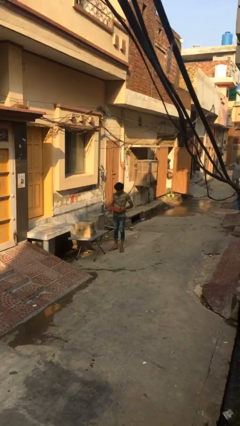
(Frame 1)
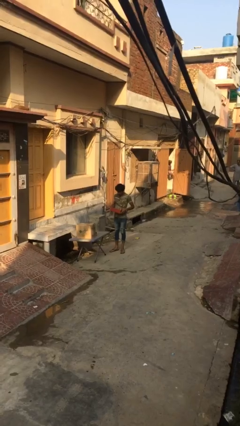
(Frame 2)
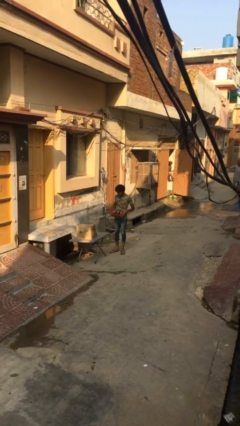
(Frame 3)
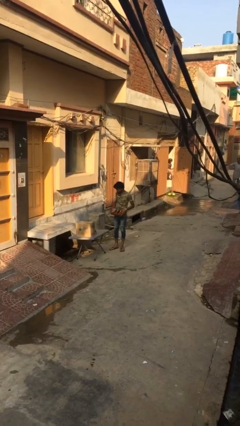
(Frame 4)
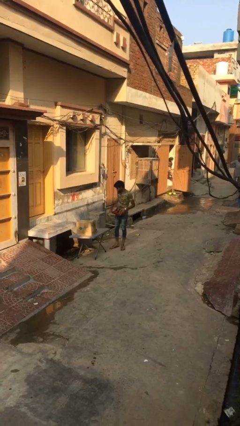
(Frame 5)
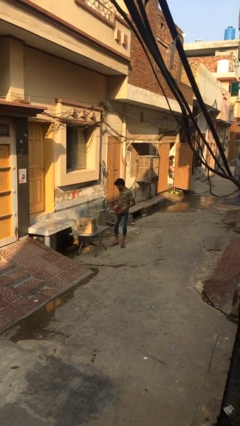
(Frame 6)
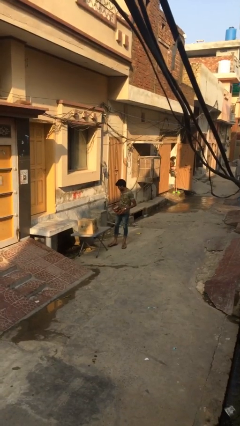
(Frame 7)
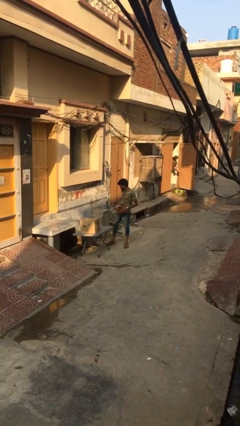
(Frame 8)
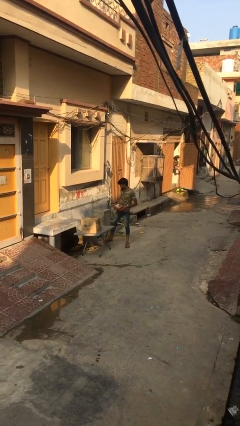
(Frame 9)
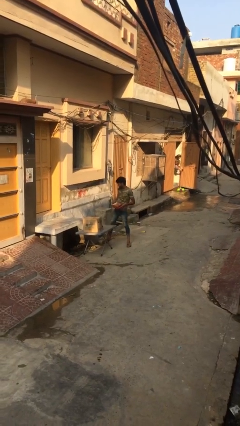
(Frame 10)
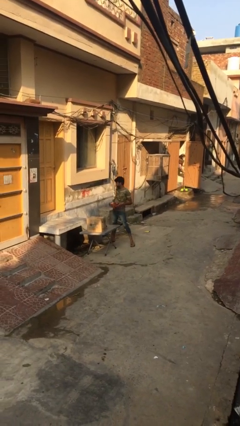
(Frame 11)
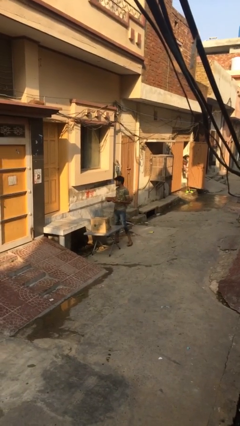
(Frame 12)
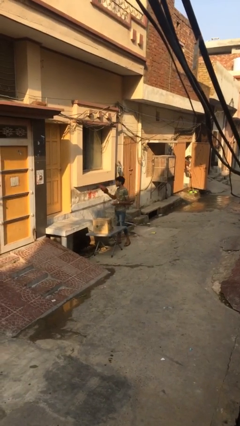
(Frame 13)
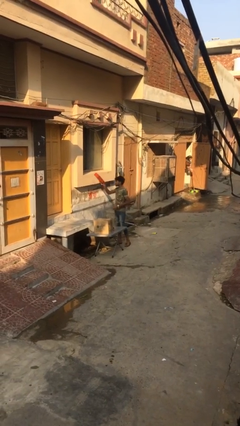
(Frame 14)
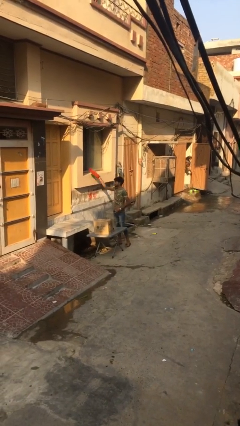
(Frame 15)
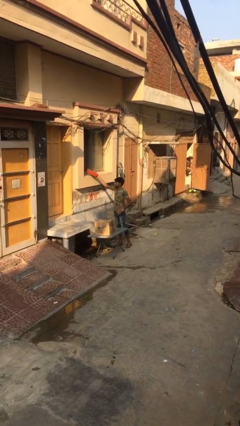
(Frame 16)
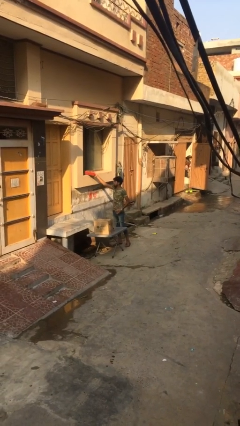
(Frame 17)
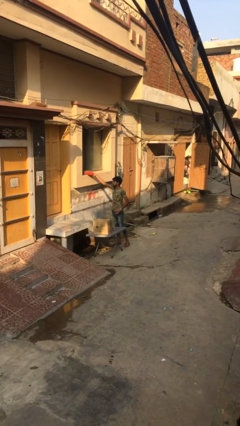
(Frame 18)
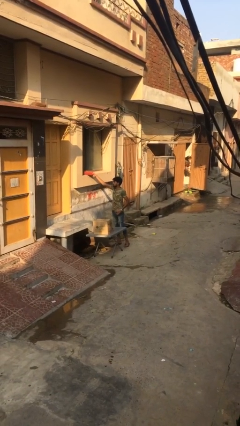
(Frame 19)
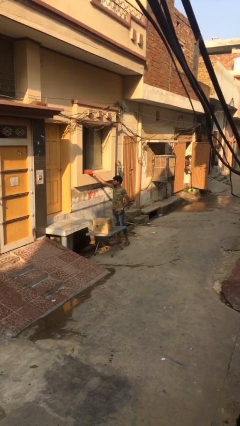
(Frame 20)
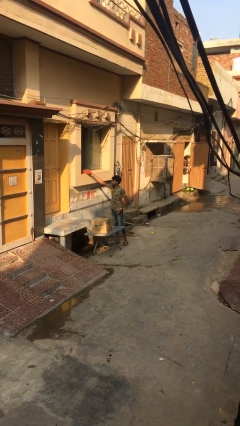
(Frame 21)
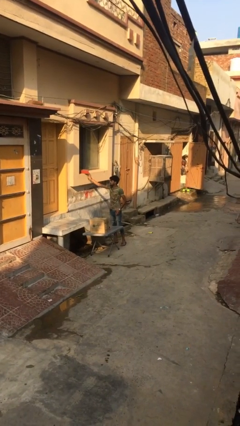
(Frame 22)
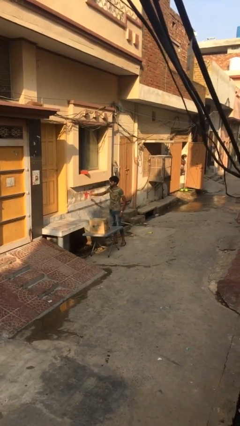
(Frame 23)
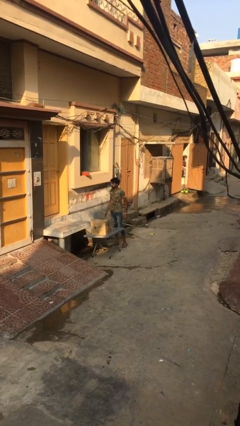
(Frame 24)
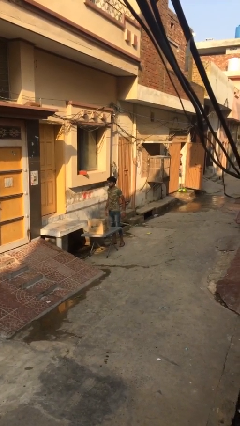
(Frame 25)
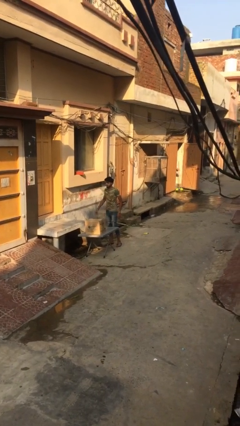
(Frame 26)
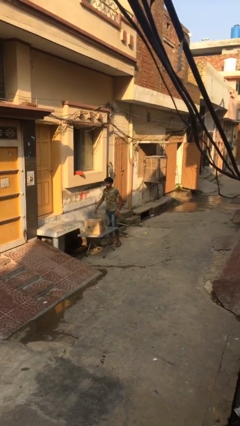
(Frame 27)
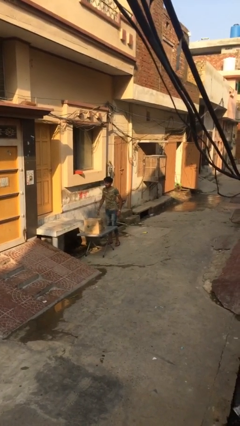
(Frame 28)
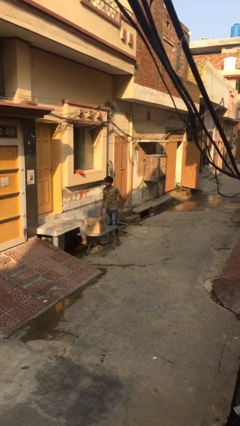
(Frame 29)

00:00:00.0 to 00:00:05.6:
person puts down object on shelf

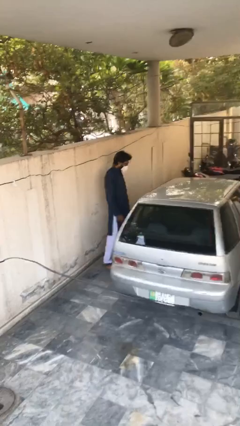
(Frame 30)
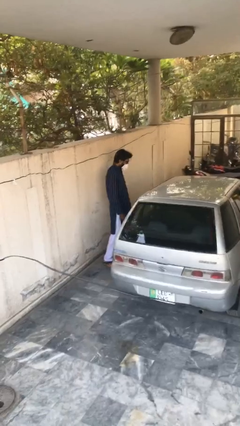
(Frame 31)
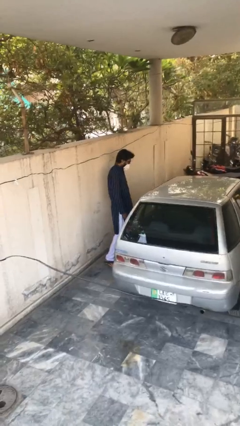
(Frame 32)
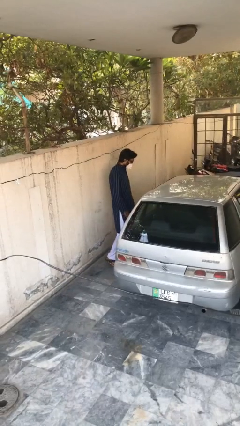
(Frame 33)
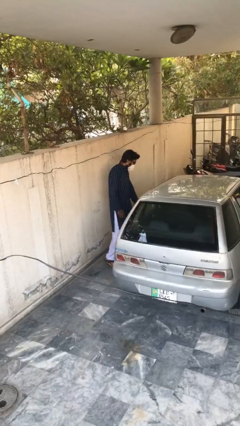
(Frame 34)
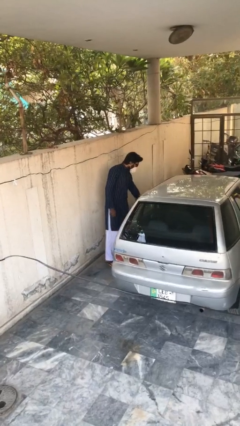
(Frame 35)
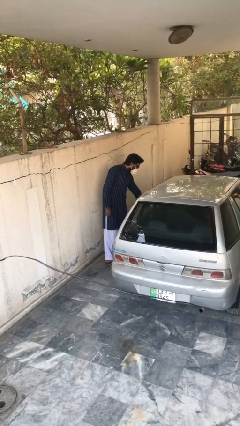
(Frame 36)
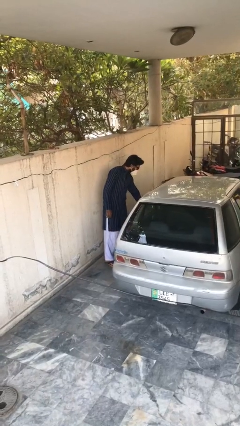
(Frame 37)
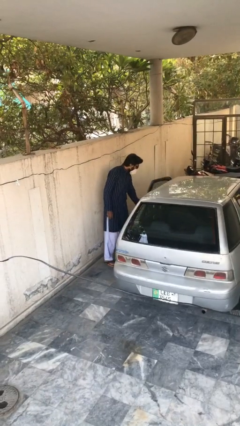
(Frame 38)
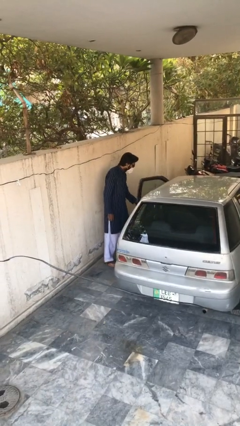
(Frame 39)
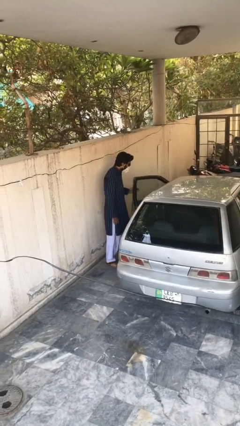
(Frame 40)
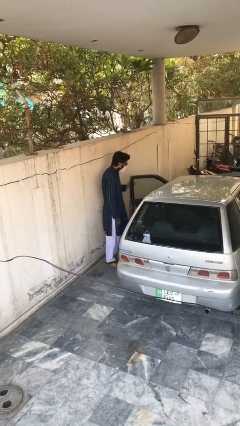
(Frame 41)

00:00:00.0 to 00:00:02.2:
person opens car door

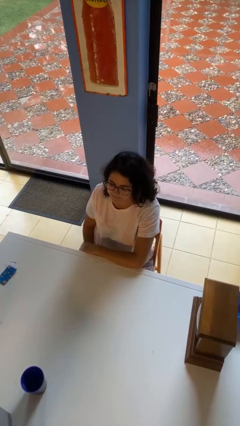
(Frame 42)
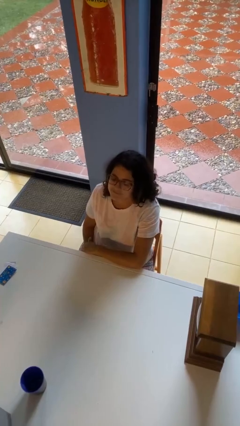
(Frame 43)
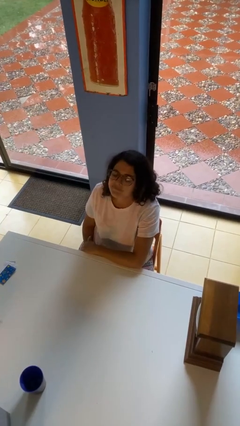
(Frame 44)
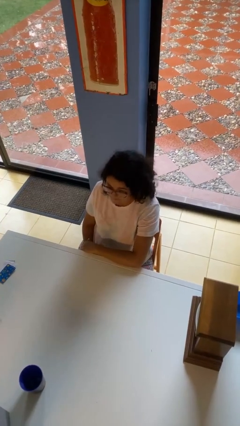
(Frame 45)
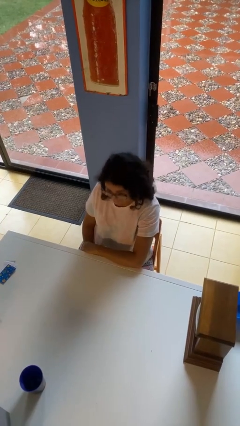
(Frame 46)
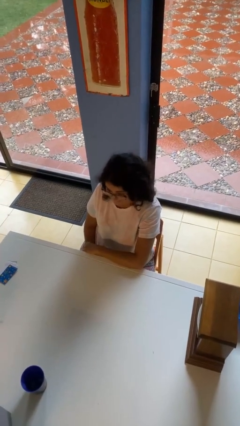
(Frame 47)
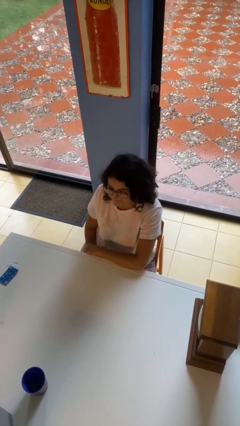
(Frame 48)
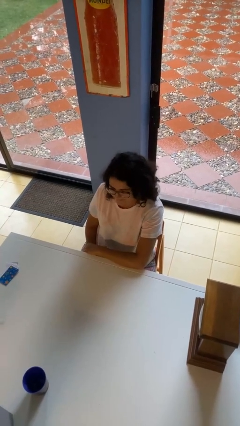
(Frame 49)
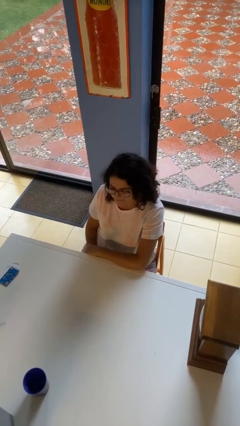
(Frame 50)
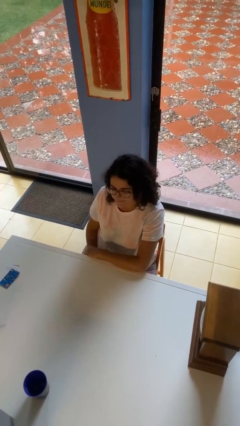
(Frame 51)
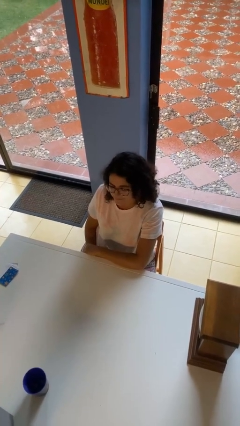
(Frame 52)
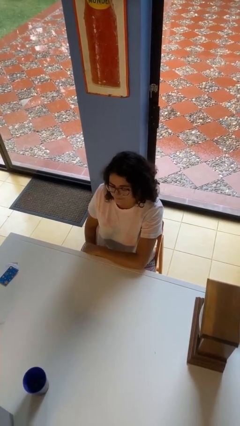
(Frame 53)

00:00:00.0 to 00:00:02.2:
person nods head

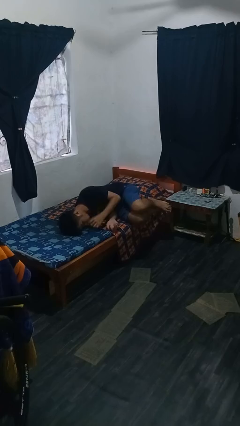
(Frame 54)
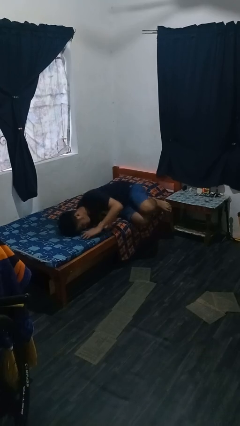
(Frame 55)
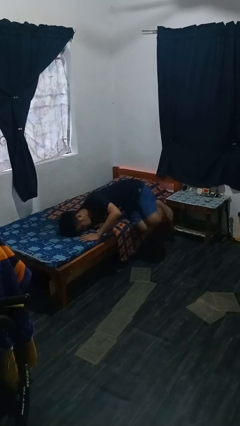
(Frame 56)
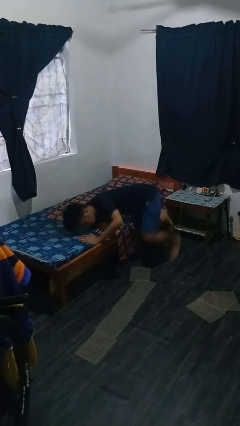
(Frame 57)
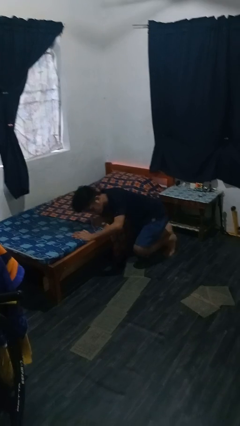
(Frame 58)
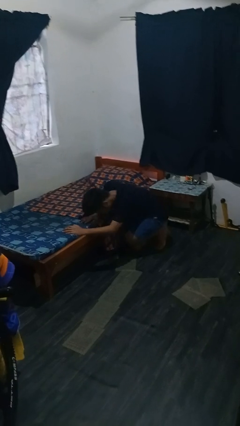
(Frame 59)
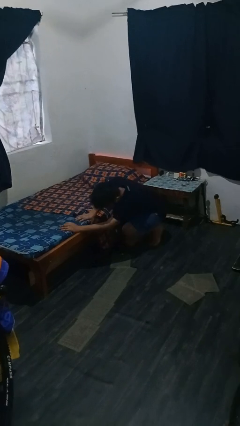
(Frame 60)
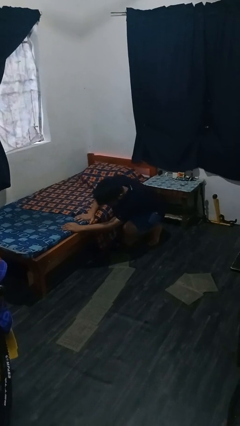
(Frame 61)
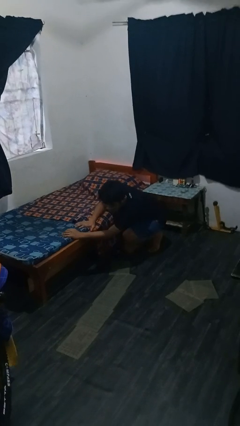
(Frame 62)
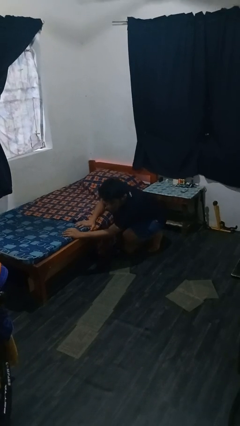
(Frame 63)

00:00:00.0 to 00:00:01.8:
person falls from bed

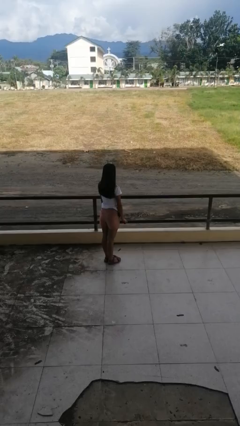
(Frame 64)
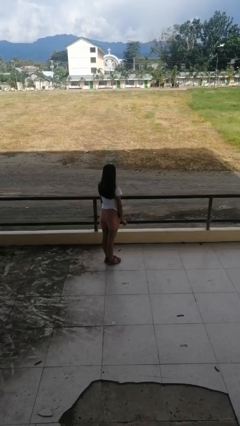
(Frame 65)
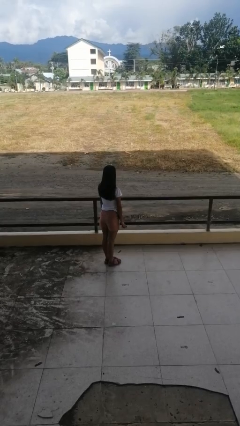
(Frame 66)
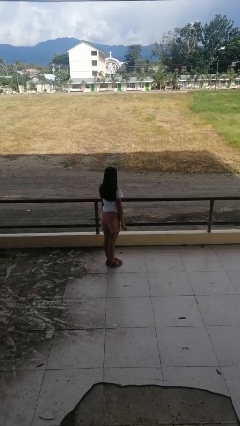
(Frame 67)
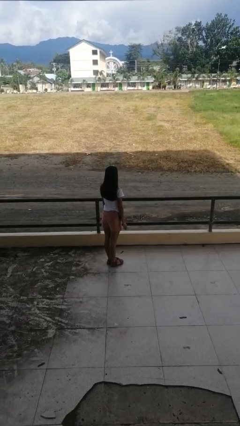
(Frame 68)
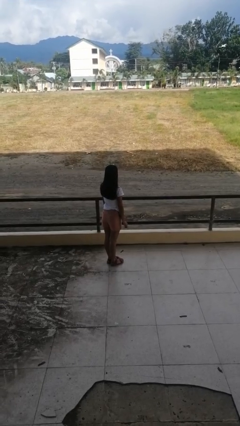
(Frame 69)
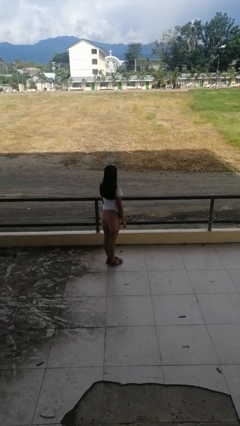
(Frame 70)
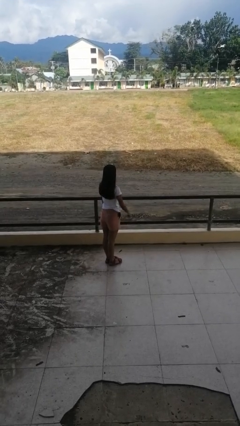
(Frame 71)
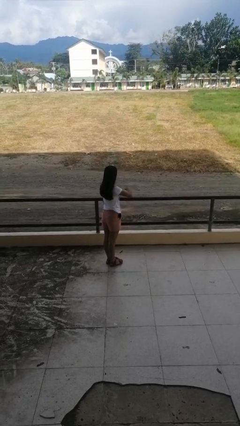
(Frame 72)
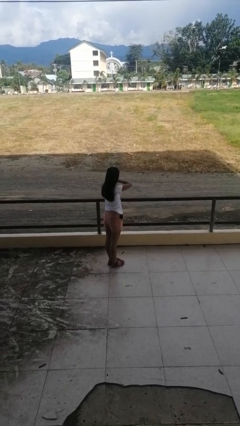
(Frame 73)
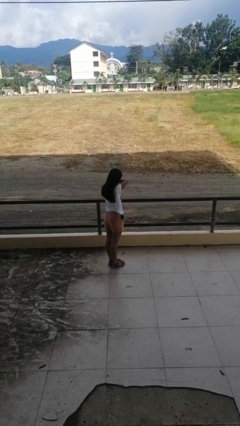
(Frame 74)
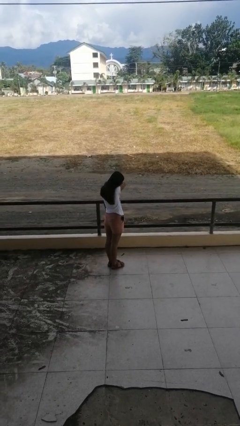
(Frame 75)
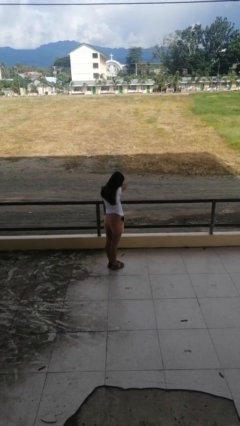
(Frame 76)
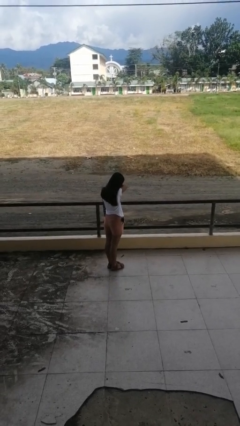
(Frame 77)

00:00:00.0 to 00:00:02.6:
person sneezes into arm

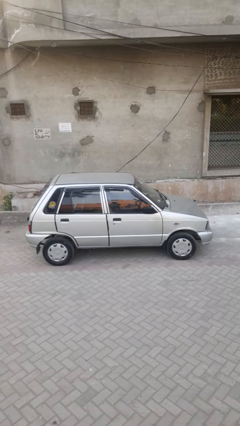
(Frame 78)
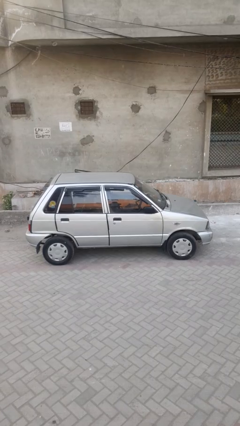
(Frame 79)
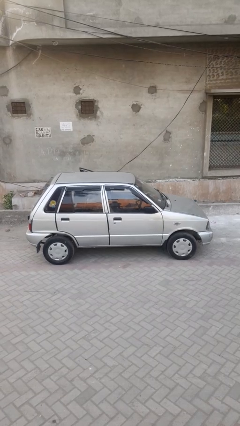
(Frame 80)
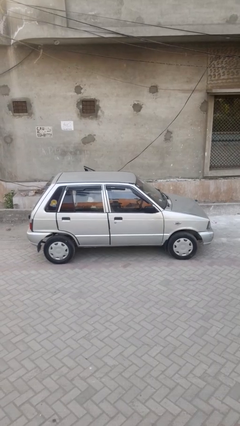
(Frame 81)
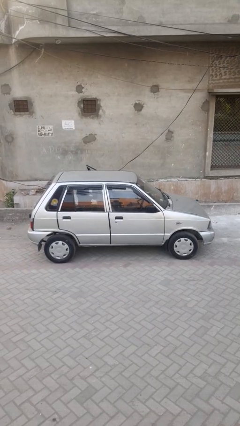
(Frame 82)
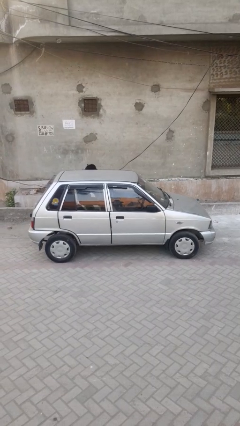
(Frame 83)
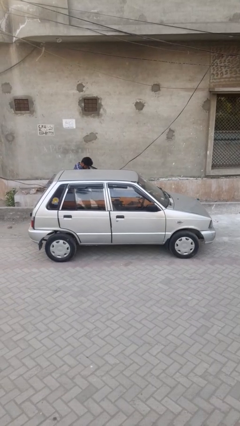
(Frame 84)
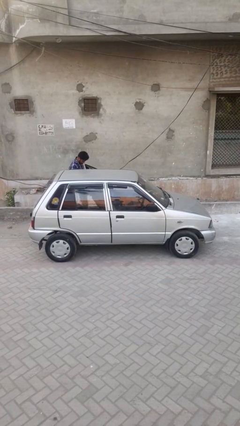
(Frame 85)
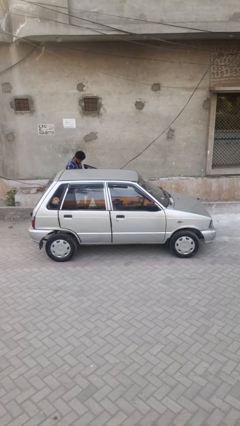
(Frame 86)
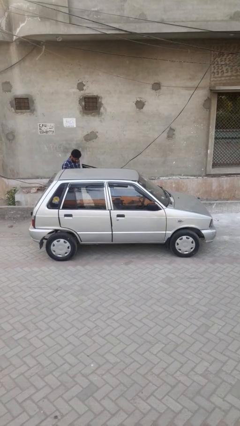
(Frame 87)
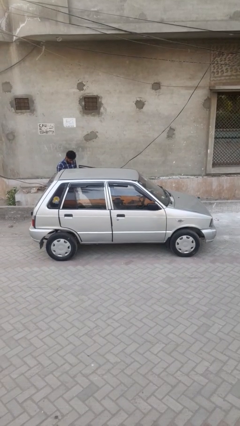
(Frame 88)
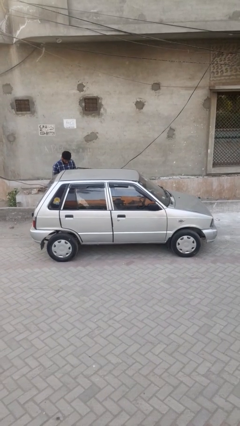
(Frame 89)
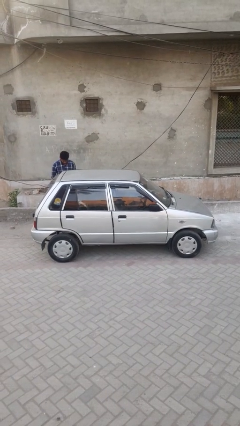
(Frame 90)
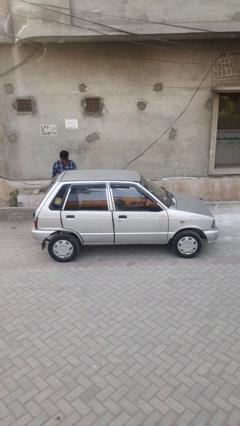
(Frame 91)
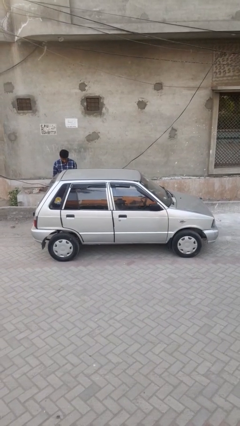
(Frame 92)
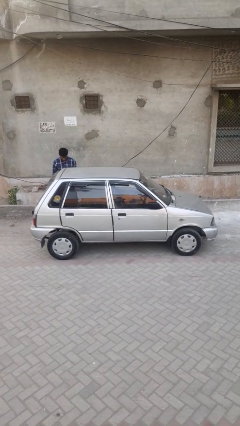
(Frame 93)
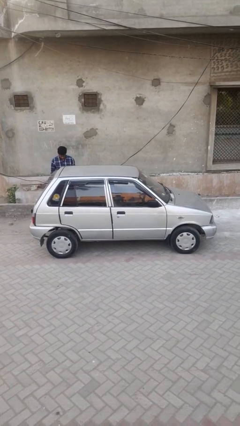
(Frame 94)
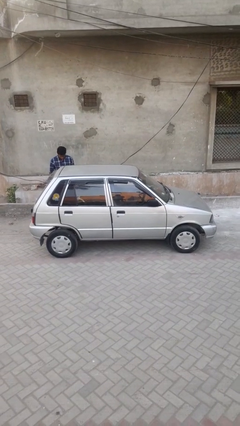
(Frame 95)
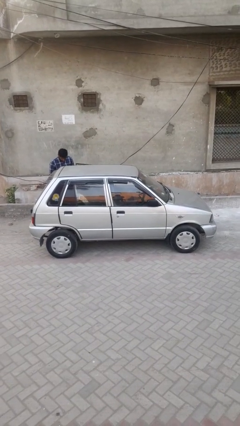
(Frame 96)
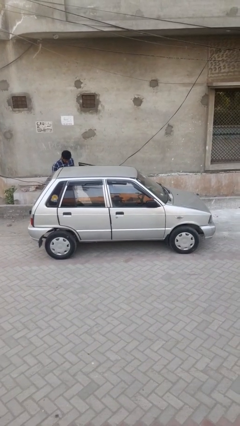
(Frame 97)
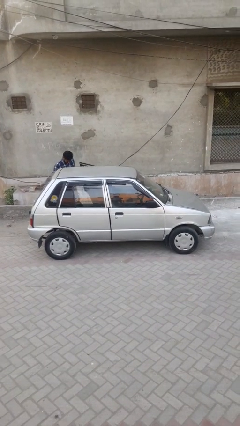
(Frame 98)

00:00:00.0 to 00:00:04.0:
car drops off person
